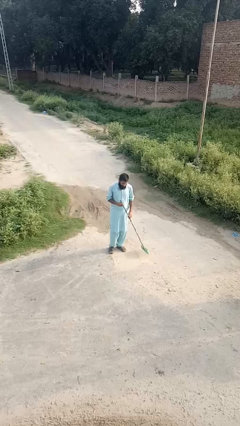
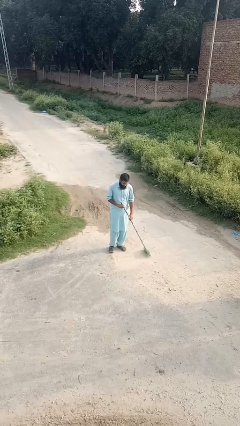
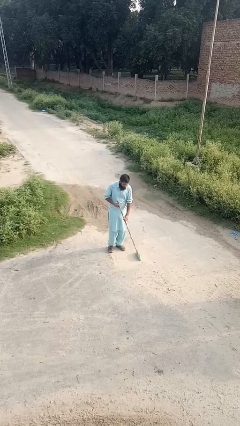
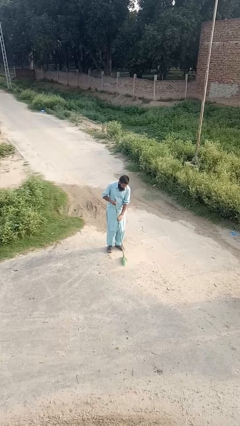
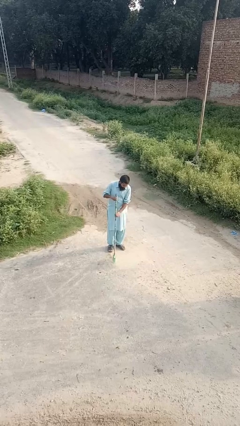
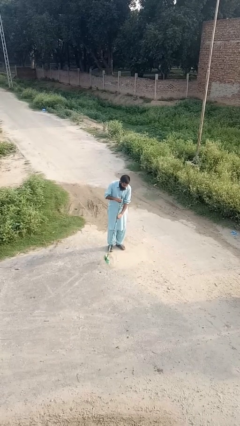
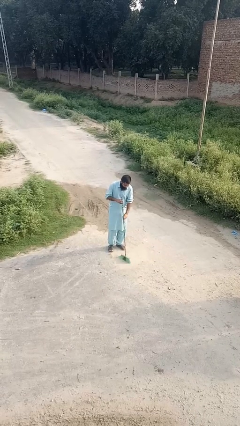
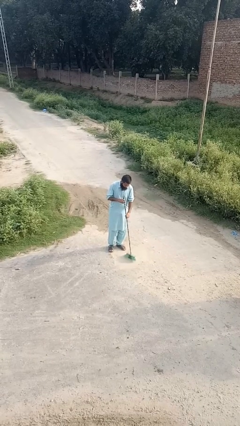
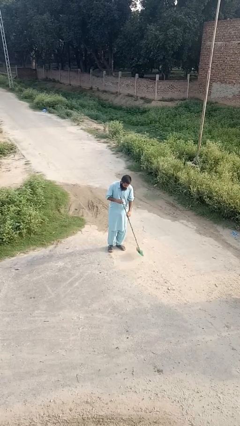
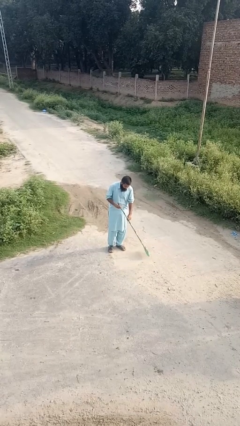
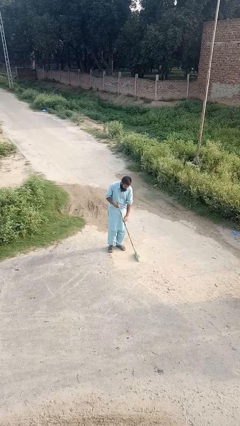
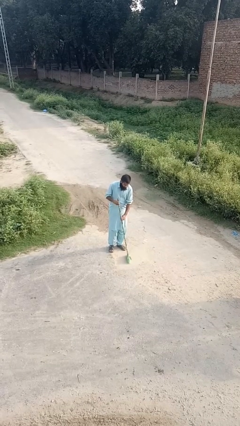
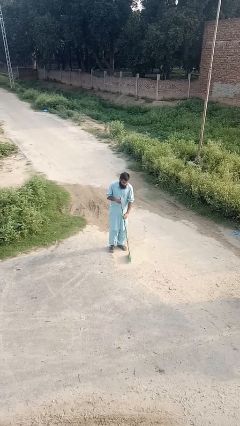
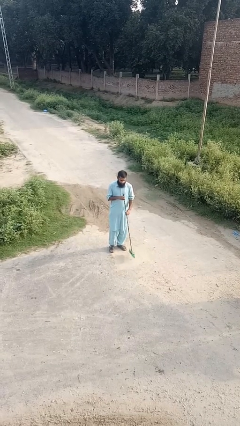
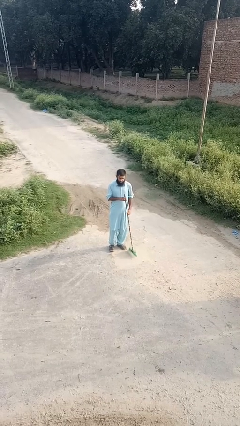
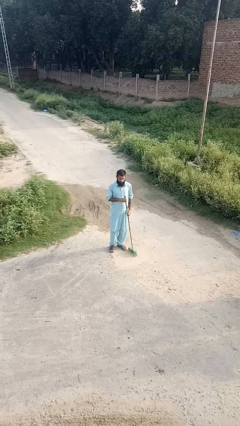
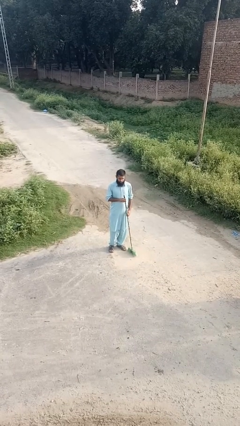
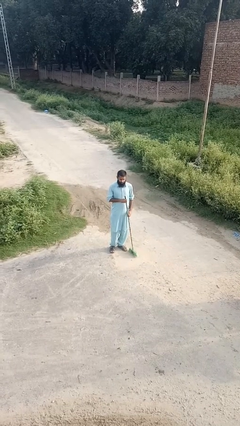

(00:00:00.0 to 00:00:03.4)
person sweeps floor

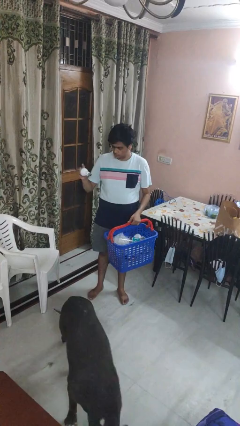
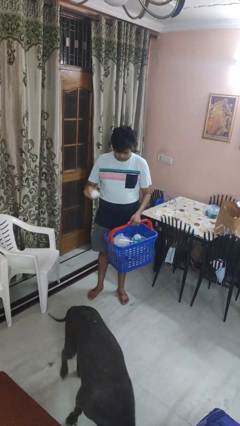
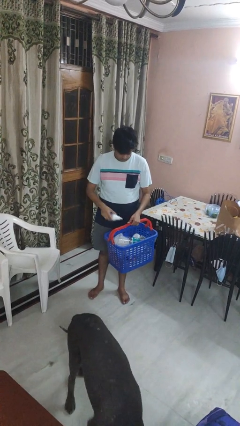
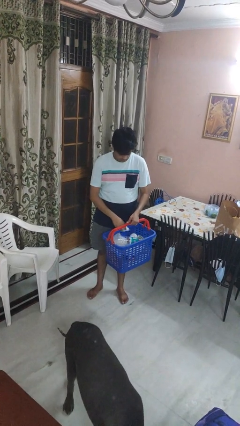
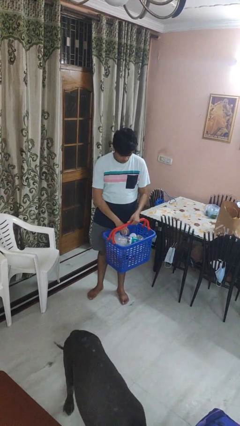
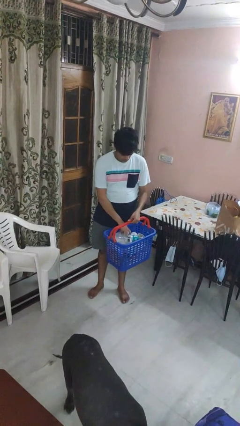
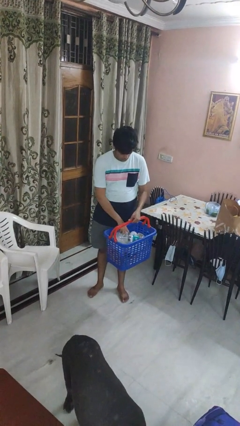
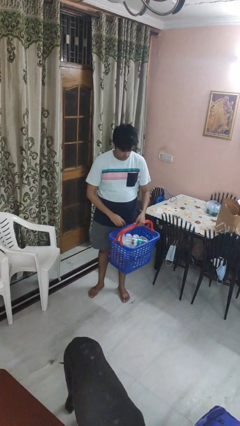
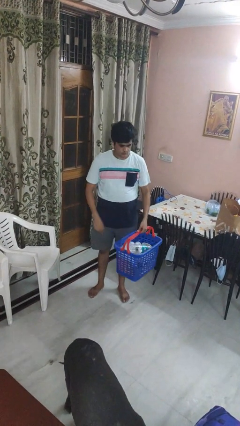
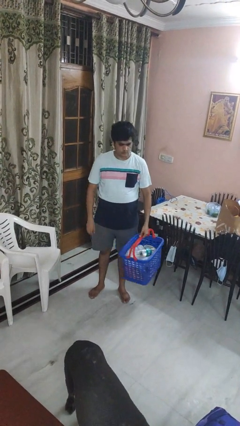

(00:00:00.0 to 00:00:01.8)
person puts object into basket

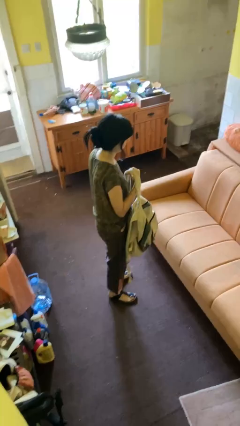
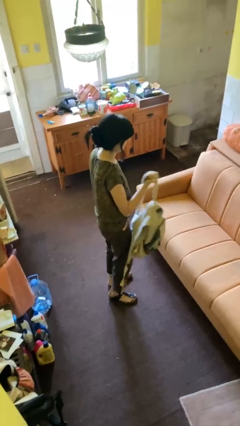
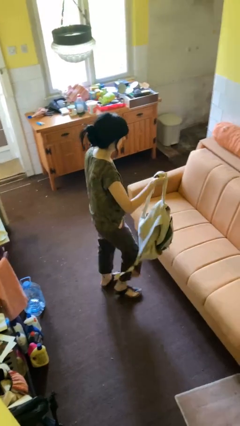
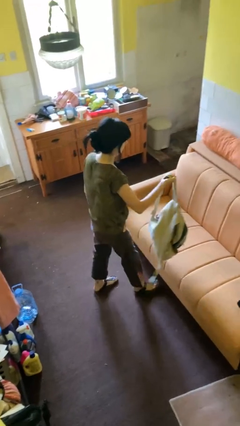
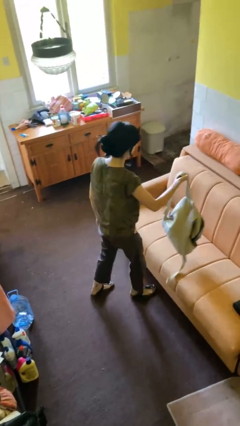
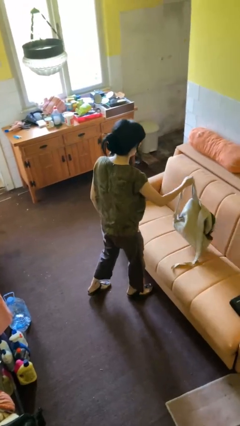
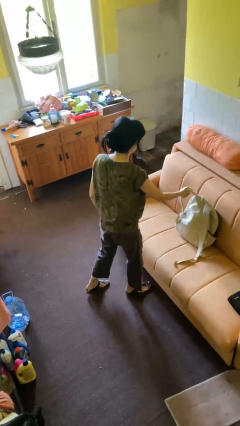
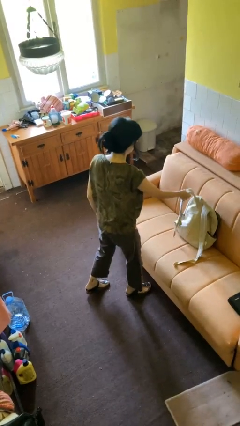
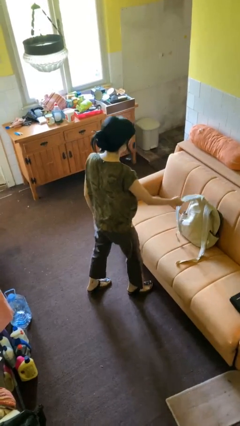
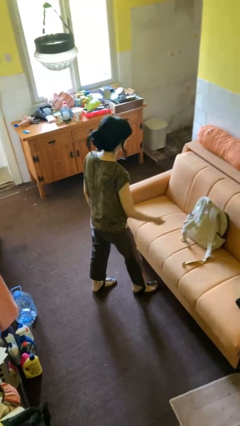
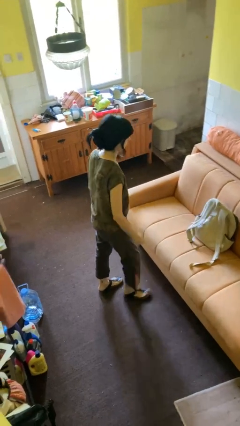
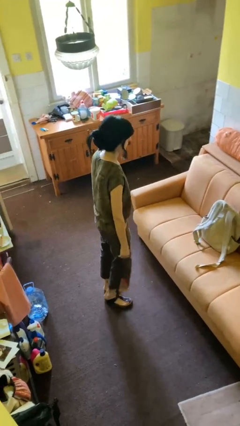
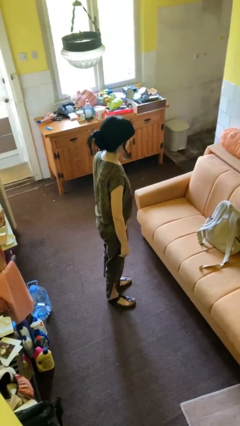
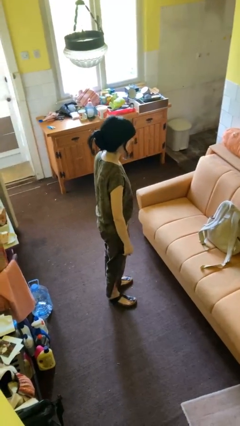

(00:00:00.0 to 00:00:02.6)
person puts down object on couch

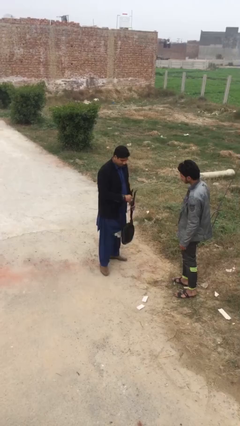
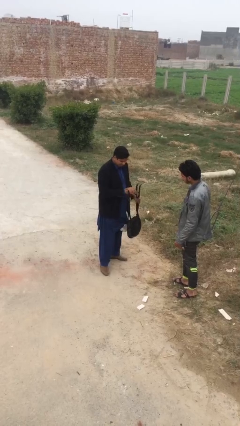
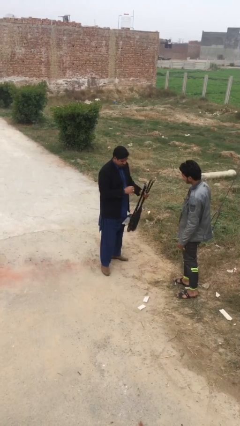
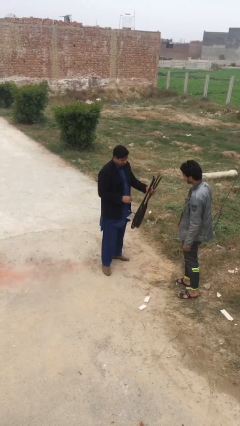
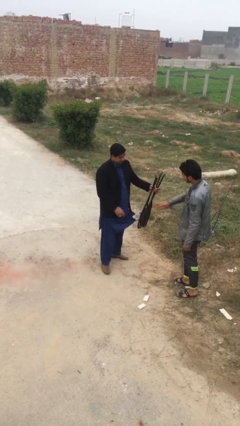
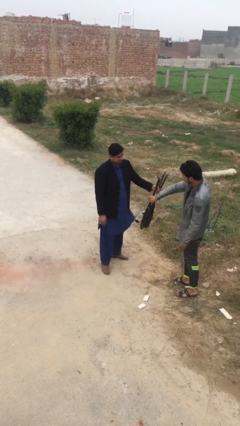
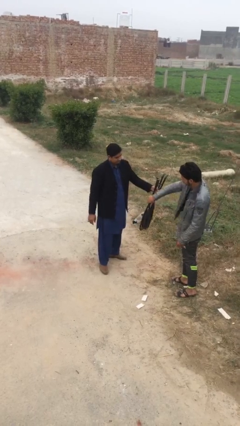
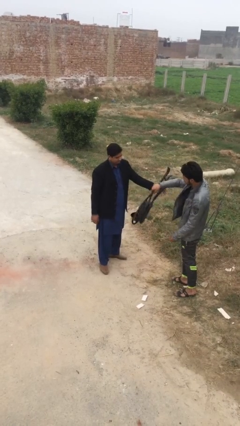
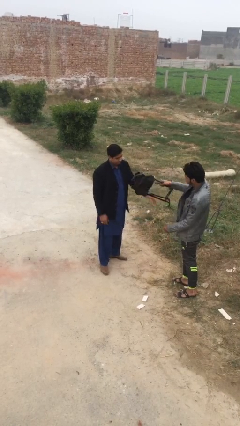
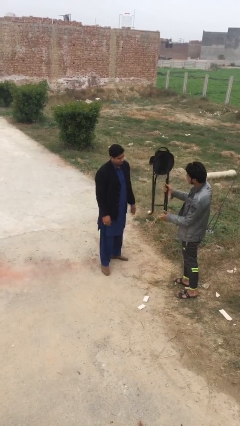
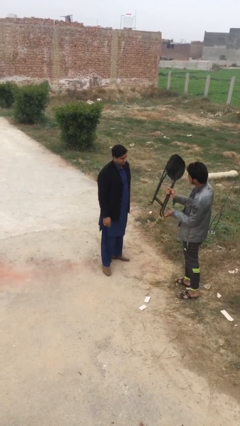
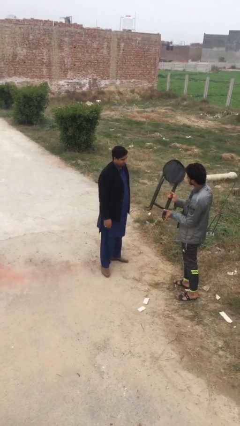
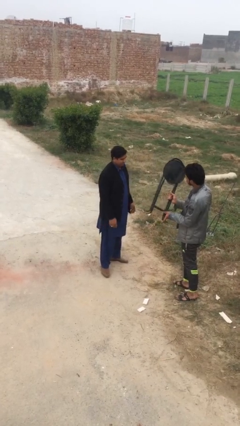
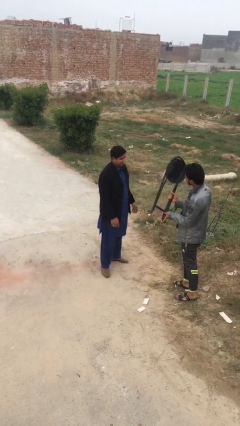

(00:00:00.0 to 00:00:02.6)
person transfers object to person

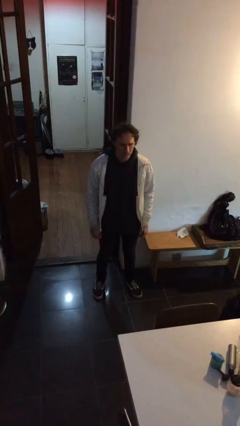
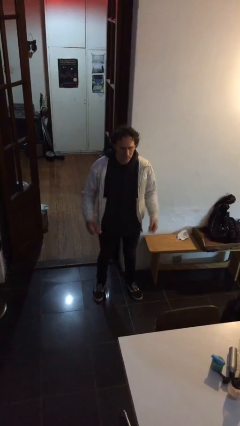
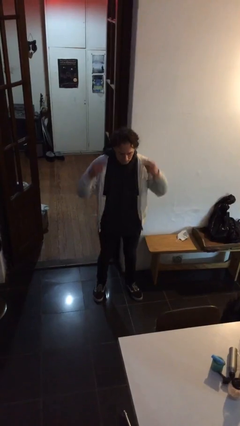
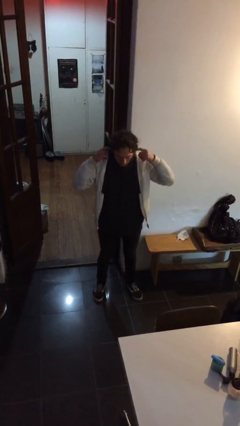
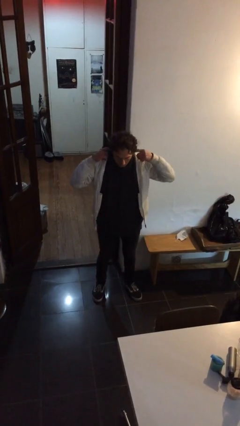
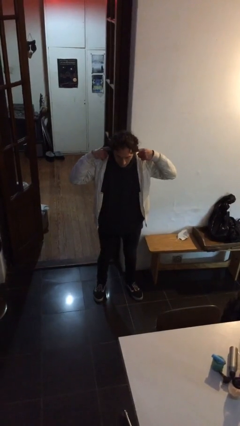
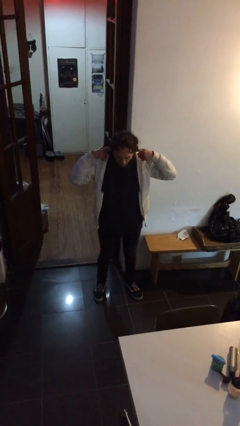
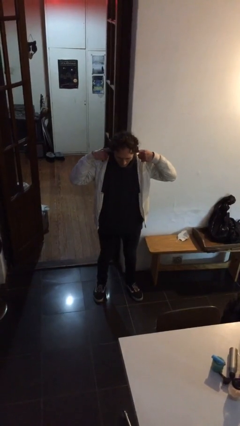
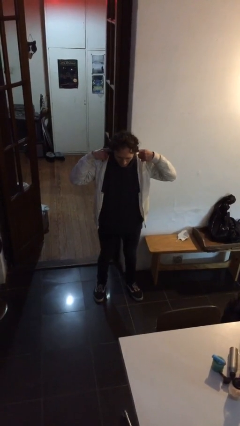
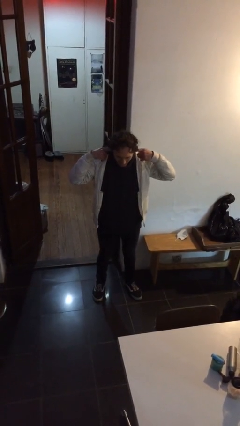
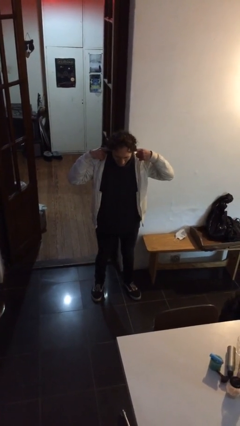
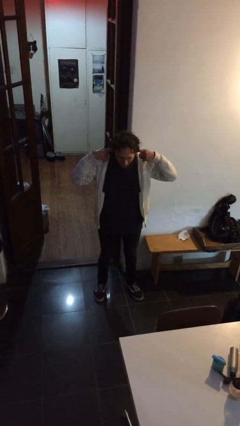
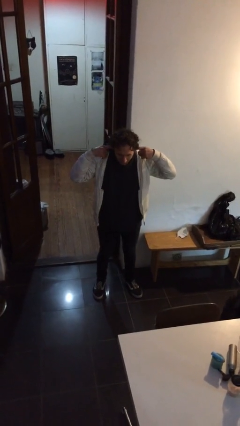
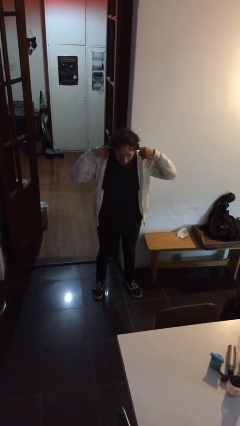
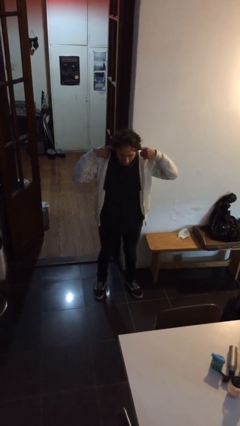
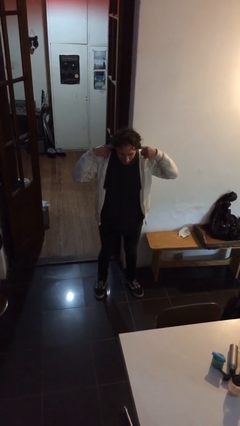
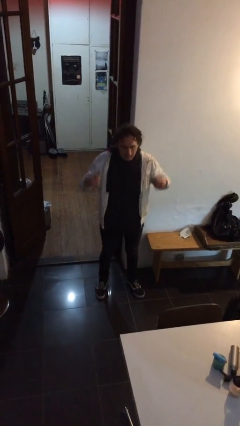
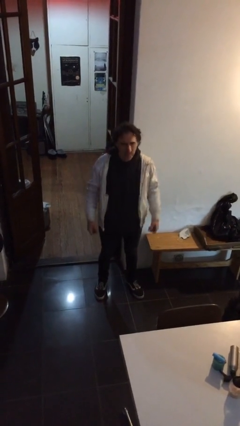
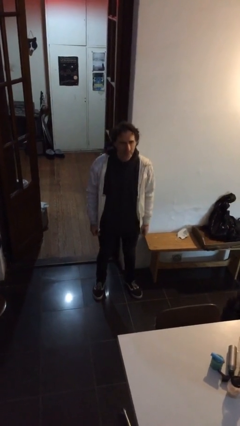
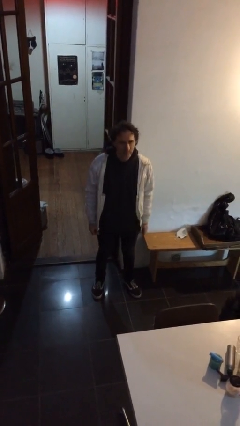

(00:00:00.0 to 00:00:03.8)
person puts fingers in ear

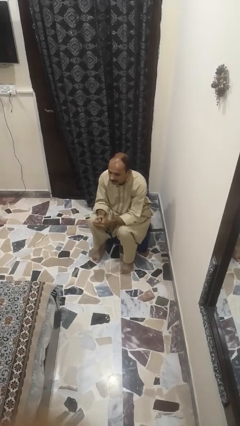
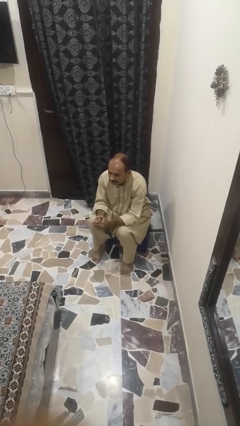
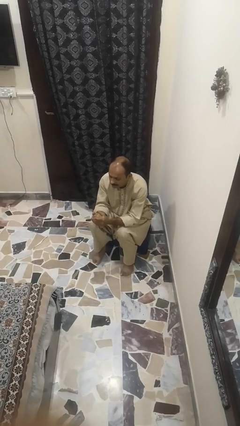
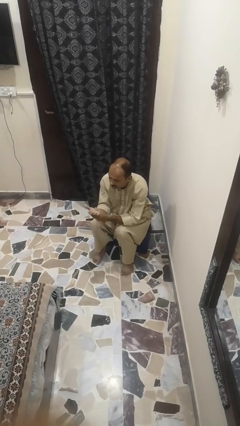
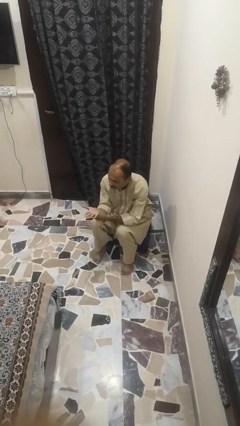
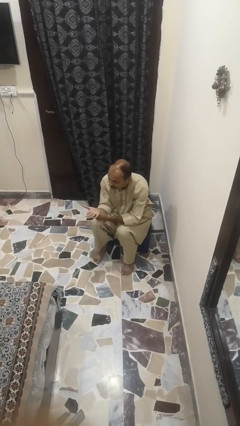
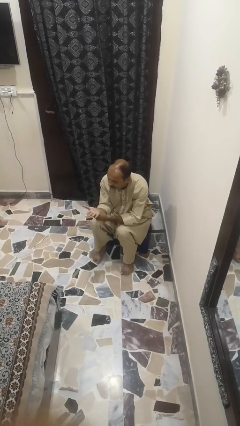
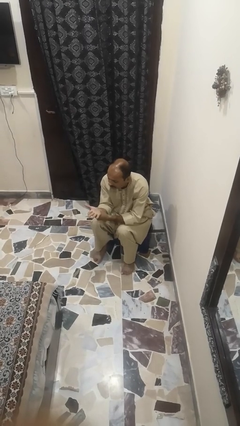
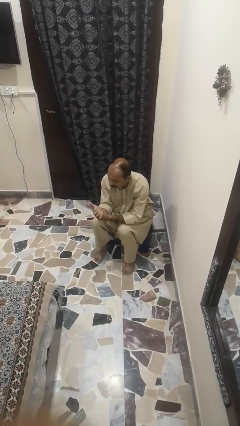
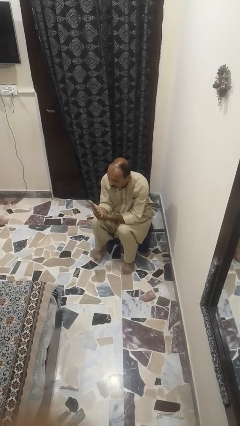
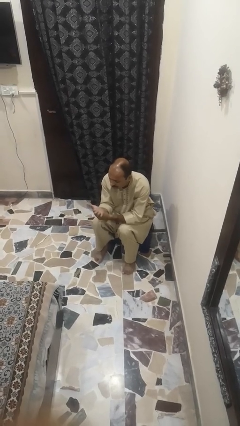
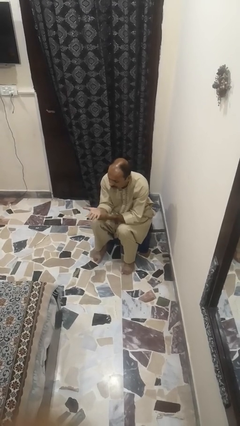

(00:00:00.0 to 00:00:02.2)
person looks at hands in lap

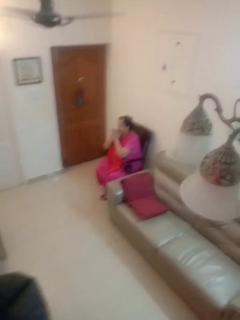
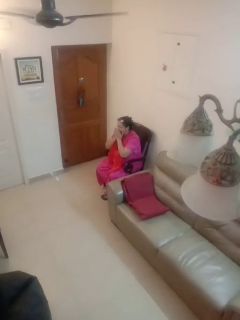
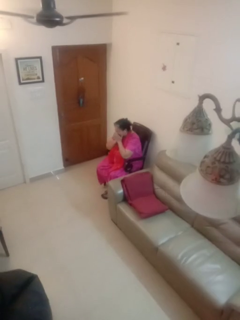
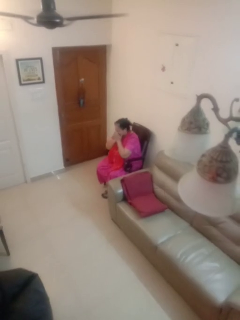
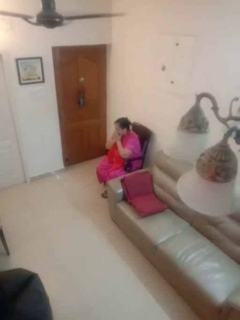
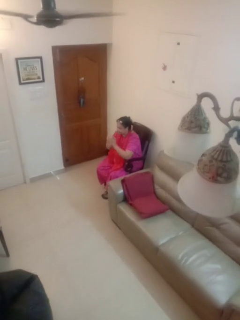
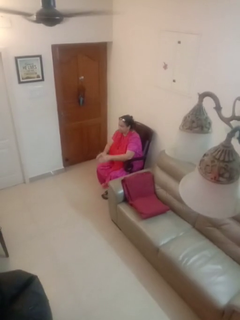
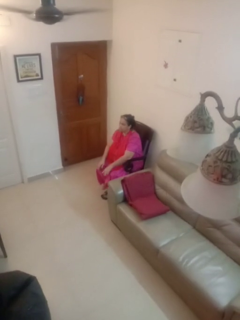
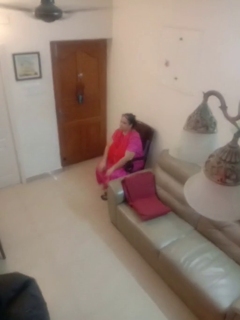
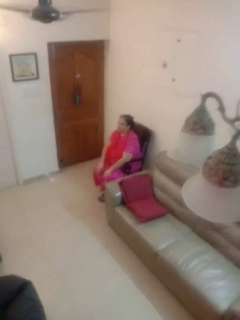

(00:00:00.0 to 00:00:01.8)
person sneezes into hand
